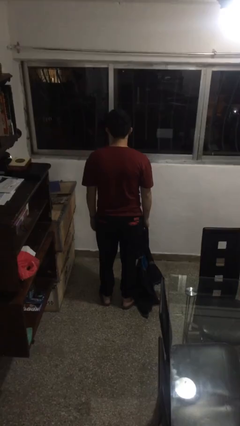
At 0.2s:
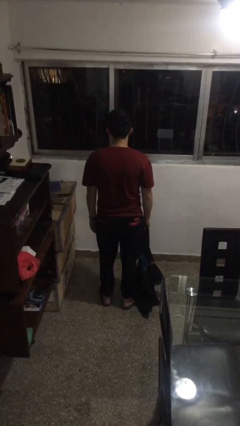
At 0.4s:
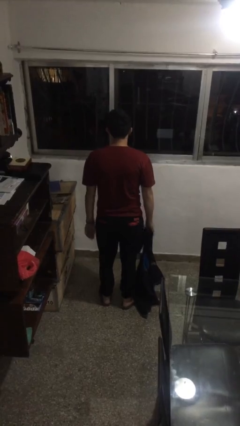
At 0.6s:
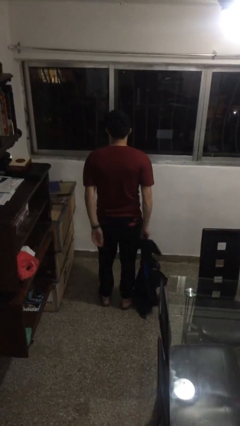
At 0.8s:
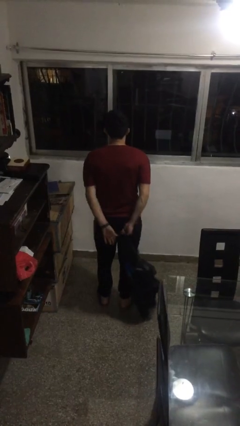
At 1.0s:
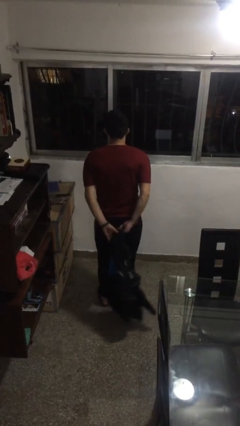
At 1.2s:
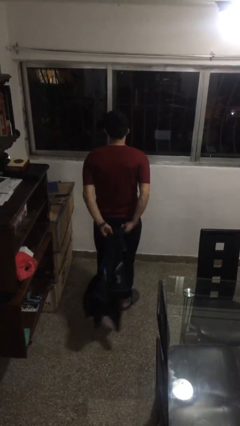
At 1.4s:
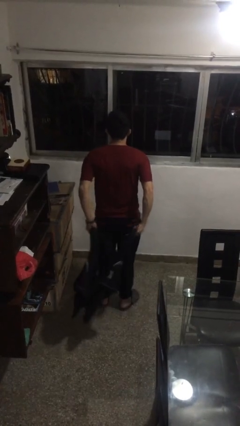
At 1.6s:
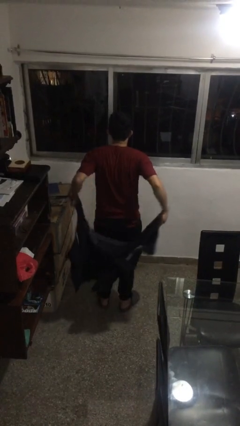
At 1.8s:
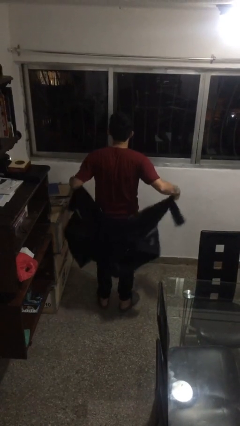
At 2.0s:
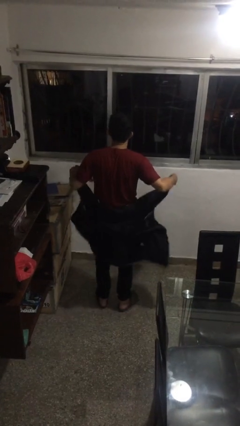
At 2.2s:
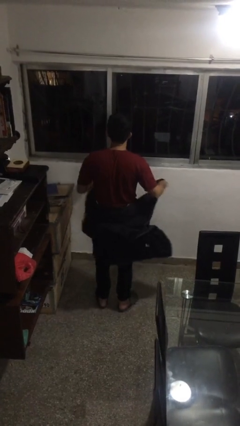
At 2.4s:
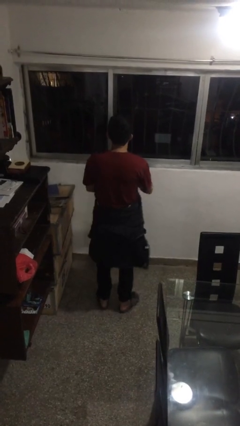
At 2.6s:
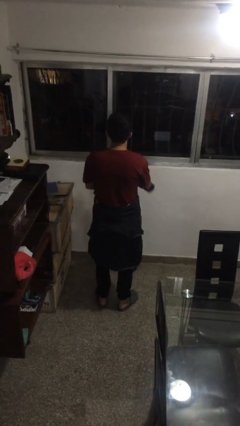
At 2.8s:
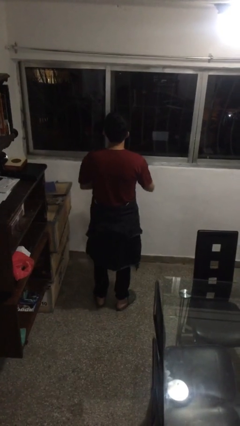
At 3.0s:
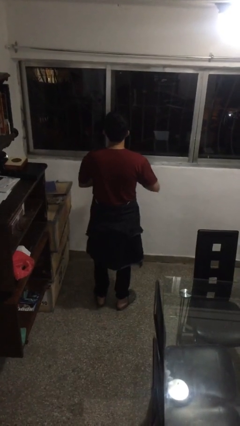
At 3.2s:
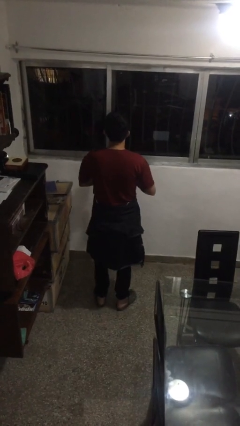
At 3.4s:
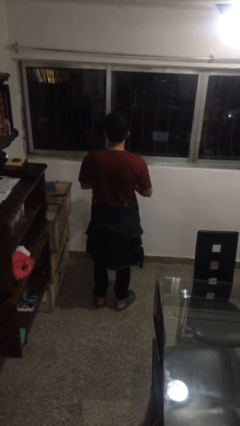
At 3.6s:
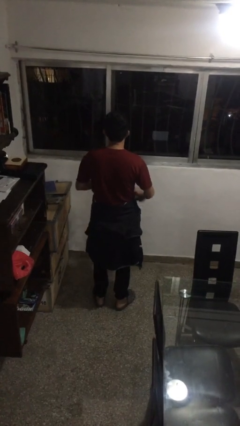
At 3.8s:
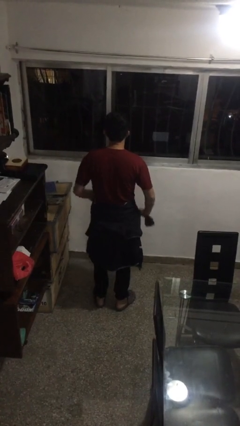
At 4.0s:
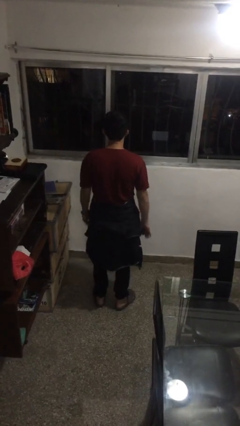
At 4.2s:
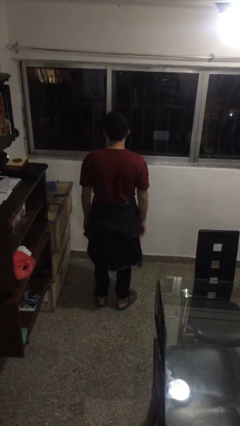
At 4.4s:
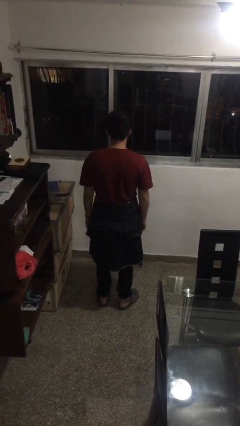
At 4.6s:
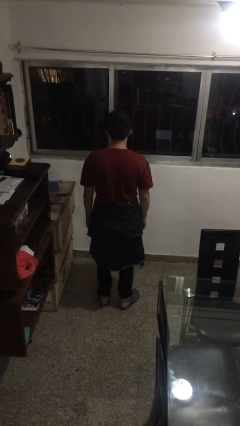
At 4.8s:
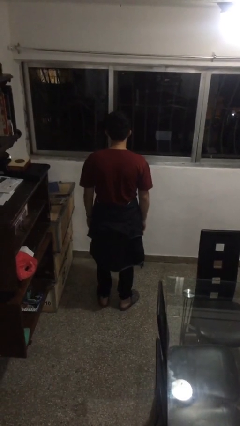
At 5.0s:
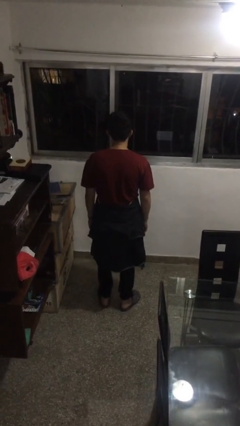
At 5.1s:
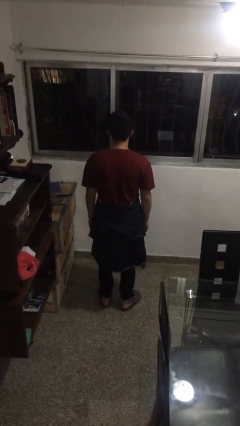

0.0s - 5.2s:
person ties jacket around waist

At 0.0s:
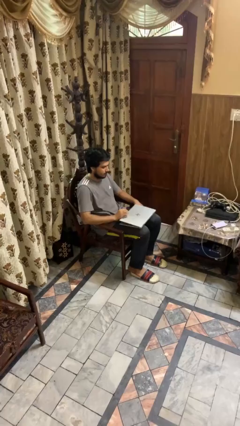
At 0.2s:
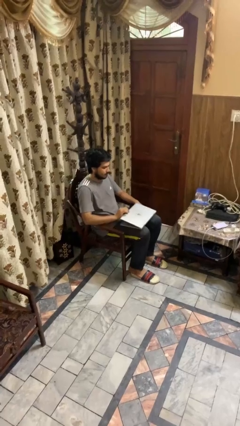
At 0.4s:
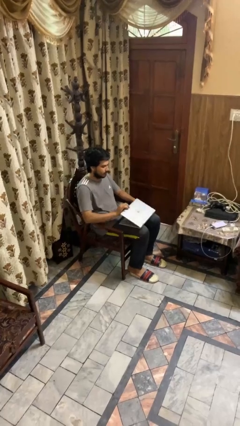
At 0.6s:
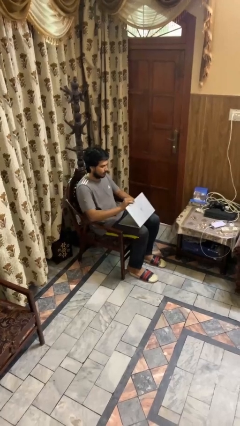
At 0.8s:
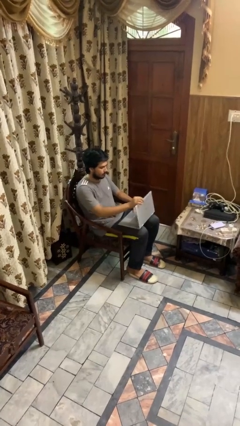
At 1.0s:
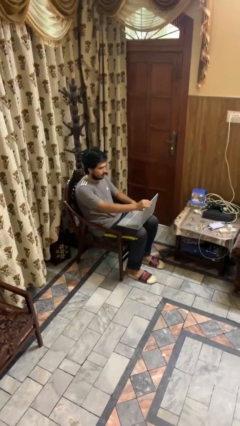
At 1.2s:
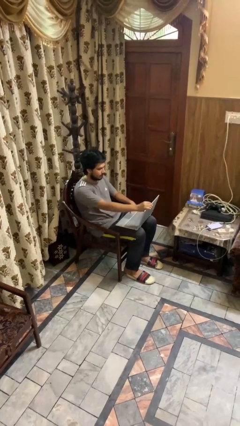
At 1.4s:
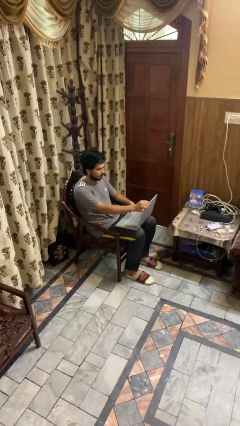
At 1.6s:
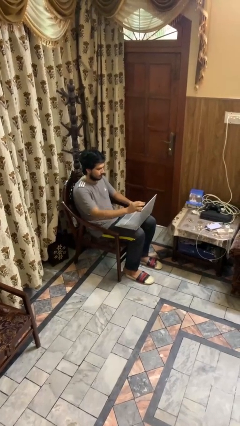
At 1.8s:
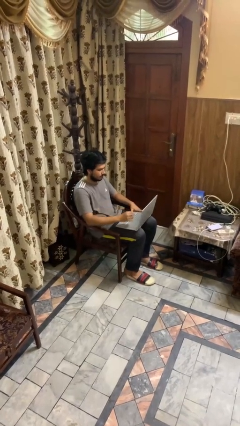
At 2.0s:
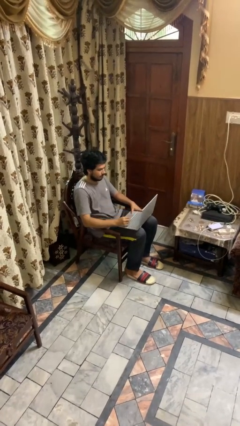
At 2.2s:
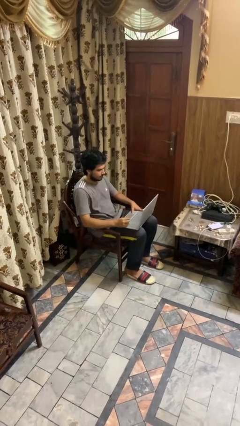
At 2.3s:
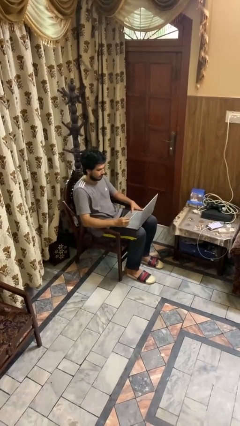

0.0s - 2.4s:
person opens laptop

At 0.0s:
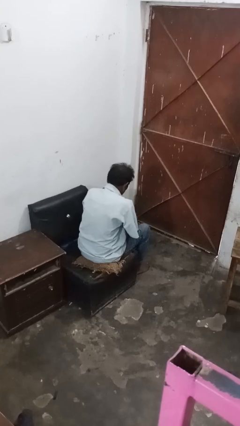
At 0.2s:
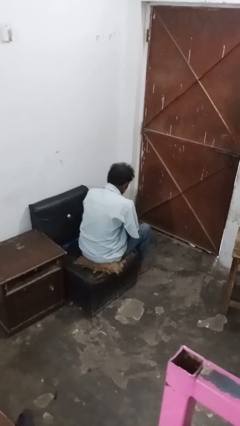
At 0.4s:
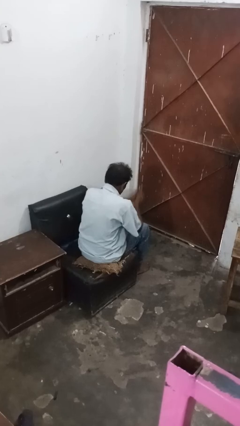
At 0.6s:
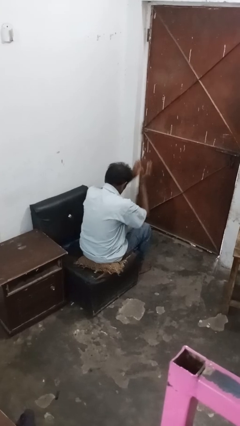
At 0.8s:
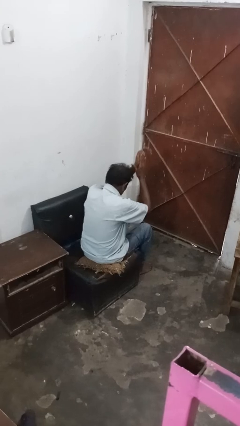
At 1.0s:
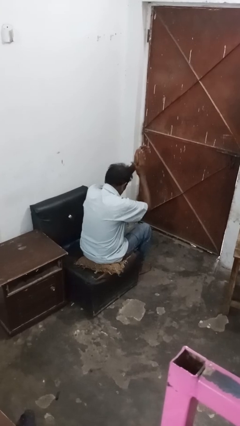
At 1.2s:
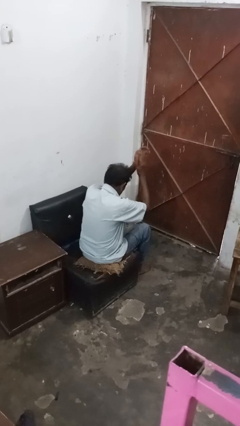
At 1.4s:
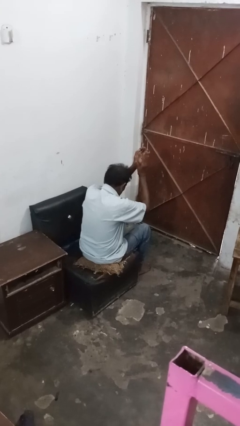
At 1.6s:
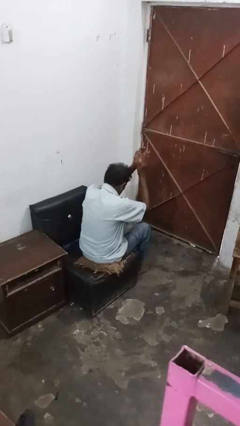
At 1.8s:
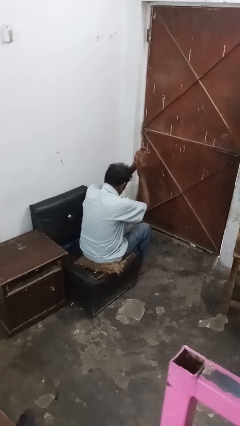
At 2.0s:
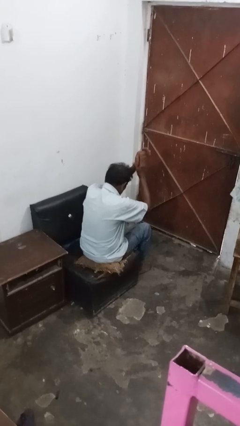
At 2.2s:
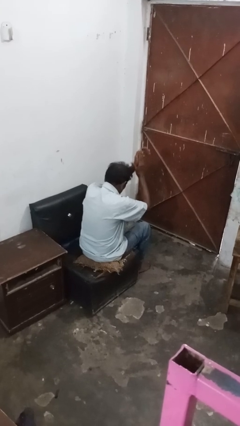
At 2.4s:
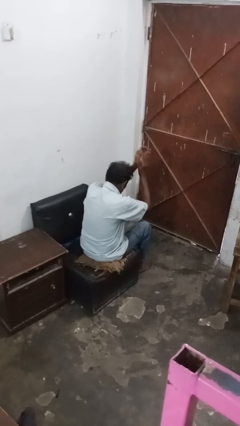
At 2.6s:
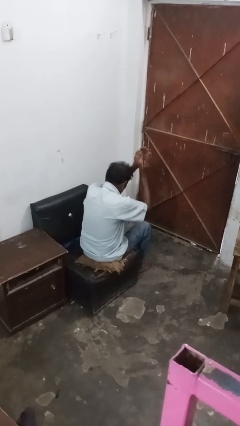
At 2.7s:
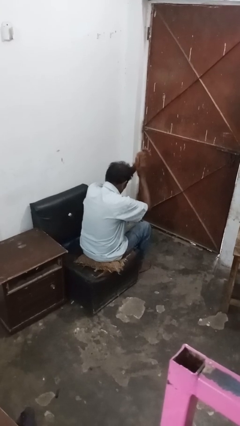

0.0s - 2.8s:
person claps hands

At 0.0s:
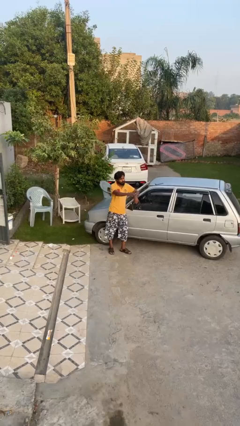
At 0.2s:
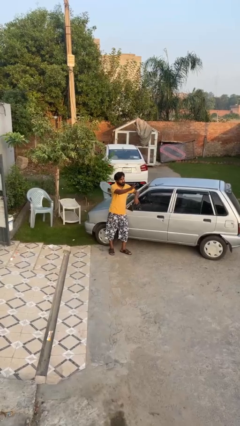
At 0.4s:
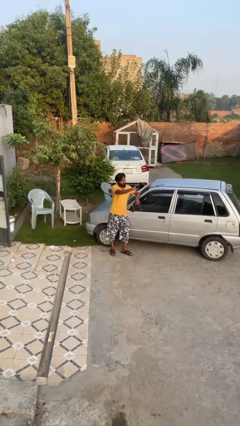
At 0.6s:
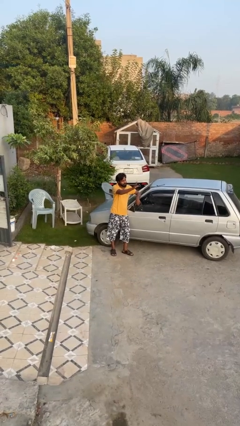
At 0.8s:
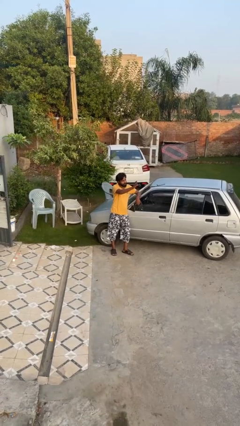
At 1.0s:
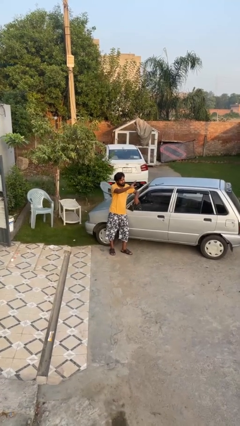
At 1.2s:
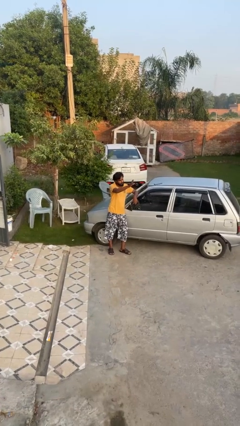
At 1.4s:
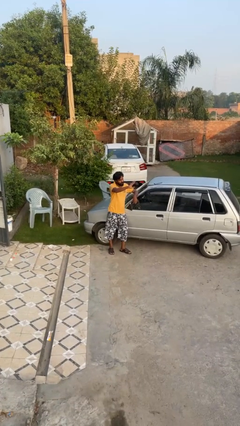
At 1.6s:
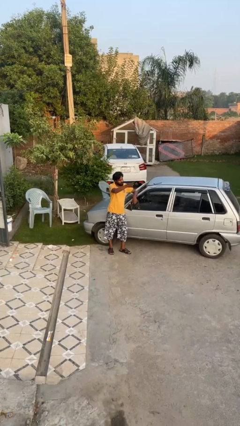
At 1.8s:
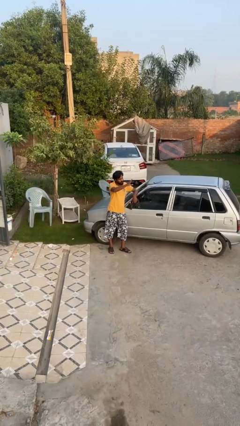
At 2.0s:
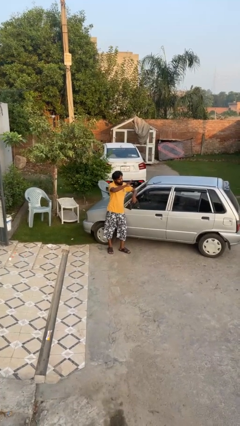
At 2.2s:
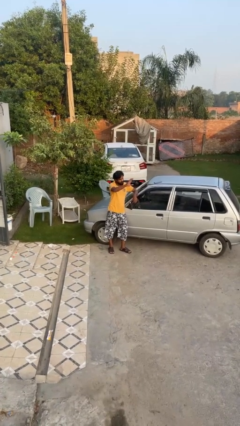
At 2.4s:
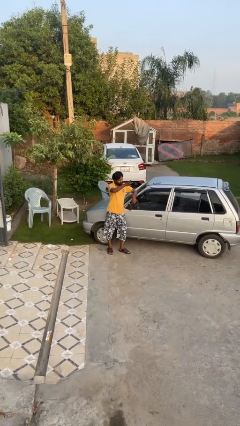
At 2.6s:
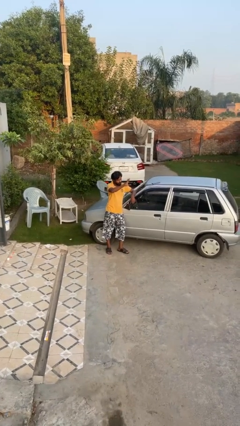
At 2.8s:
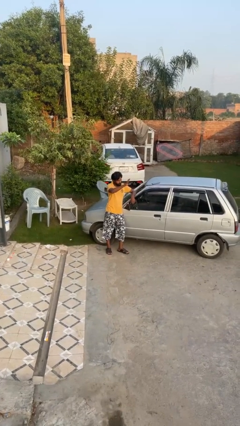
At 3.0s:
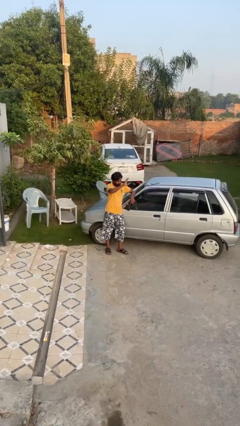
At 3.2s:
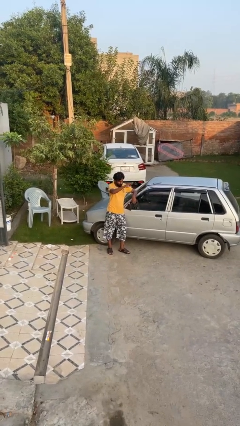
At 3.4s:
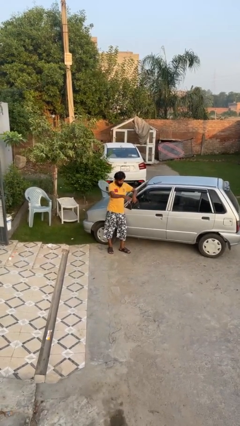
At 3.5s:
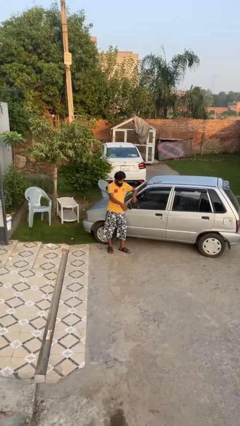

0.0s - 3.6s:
person waves at person

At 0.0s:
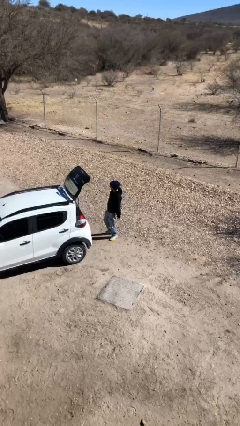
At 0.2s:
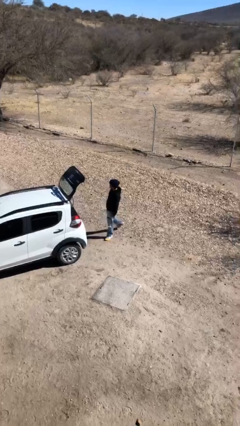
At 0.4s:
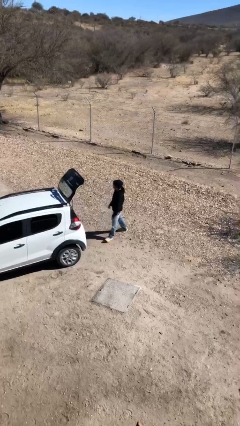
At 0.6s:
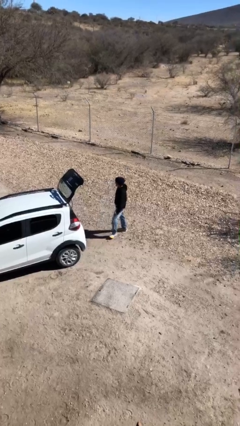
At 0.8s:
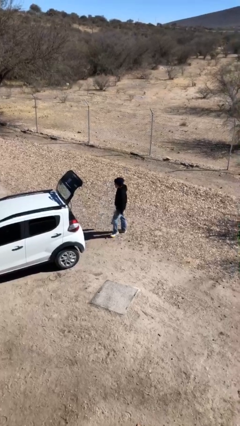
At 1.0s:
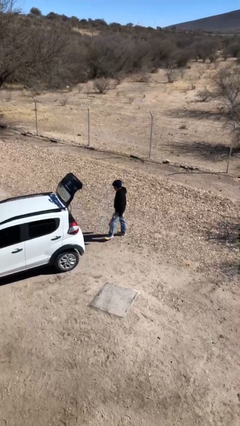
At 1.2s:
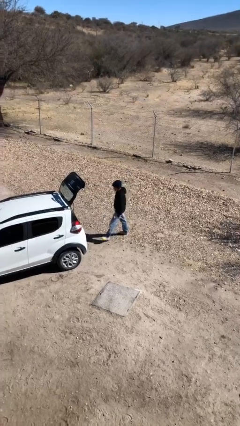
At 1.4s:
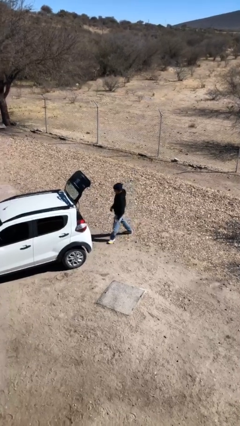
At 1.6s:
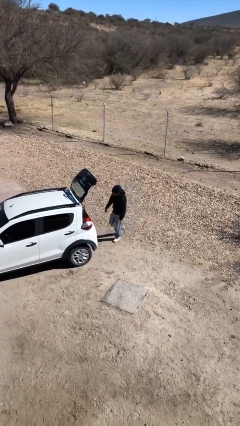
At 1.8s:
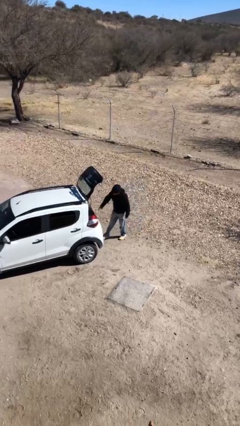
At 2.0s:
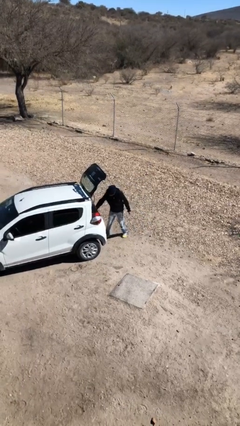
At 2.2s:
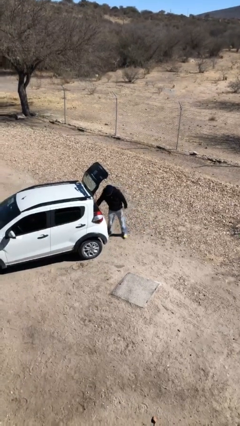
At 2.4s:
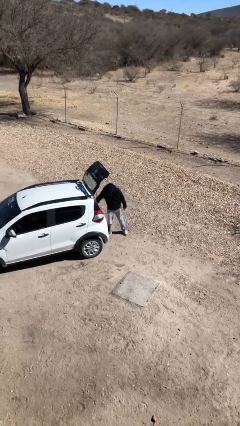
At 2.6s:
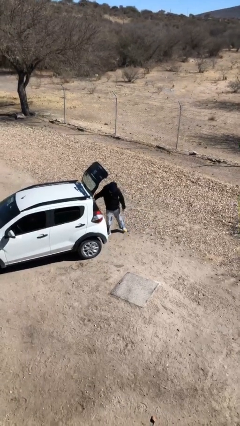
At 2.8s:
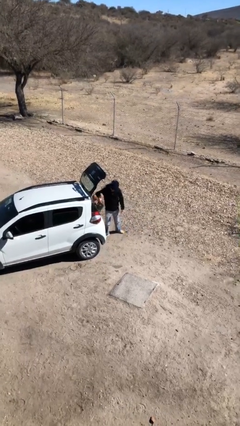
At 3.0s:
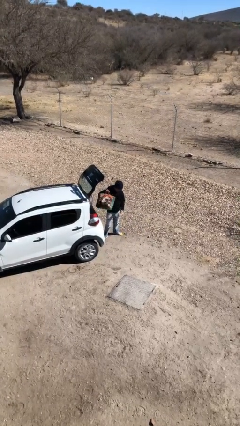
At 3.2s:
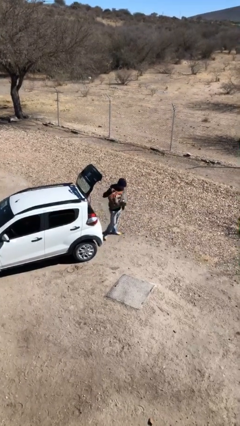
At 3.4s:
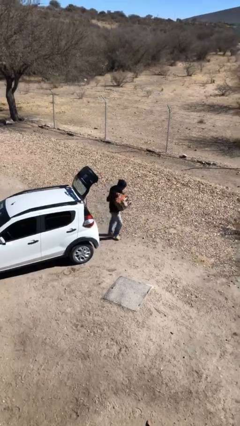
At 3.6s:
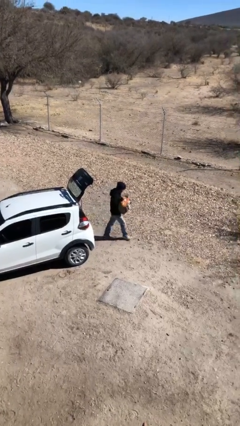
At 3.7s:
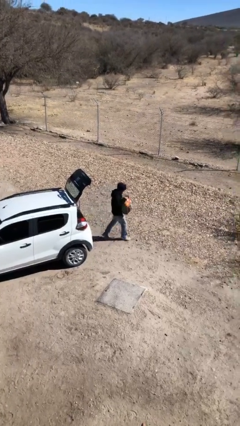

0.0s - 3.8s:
person unloads car
